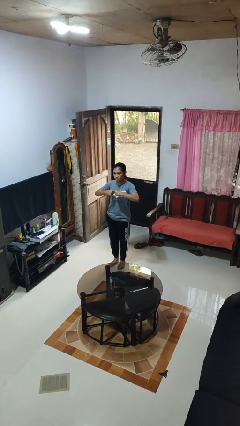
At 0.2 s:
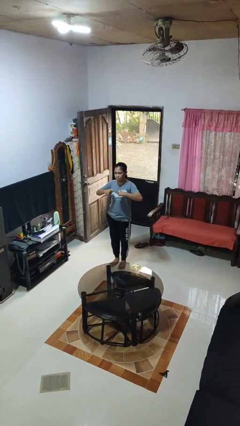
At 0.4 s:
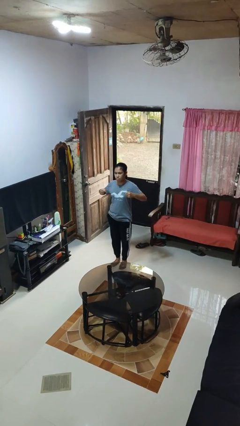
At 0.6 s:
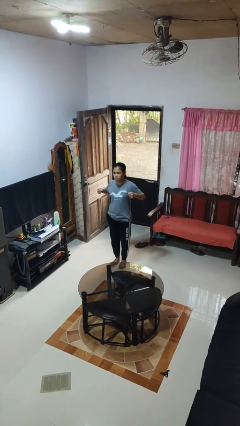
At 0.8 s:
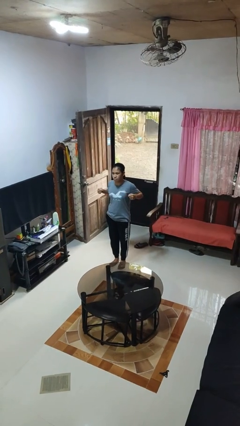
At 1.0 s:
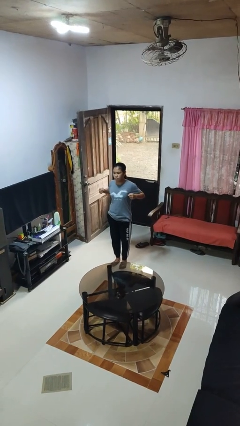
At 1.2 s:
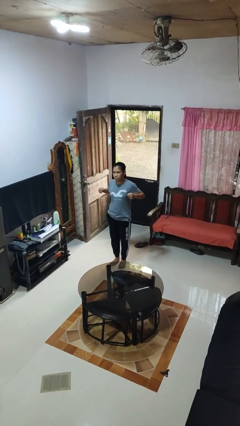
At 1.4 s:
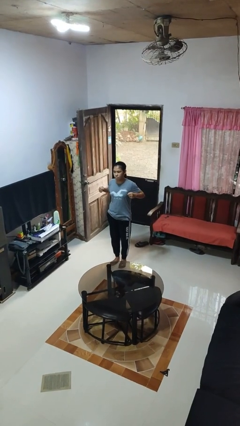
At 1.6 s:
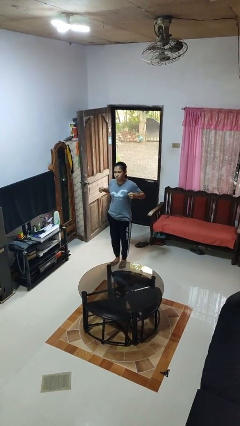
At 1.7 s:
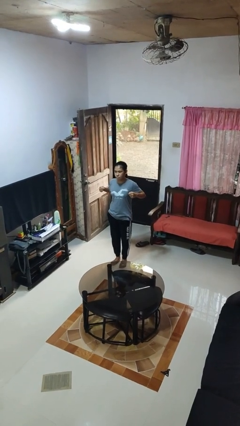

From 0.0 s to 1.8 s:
person gestures zoom in

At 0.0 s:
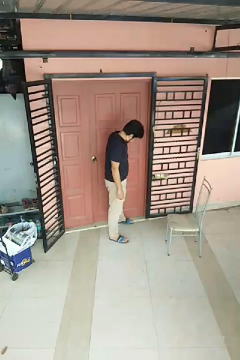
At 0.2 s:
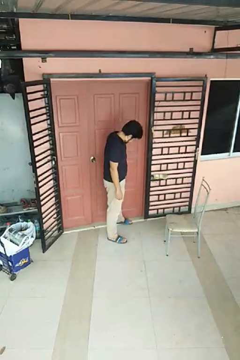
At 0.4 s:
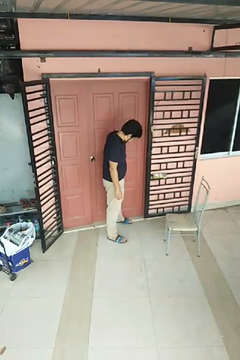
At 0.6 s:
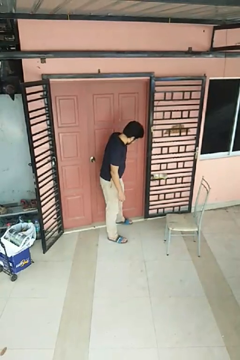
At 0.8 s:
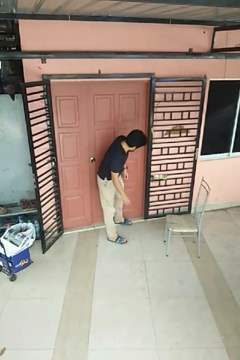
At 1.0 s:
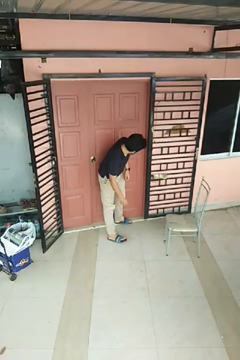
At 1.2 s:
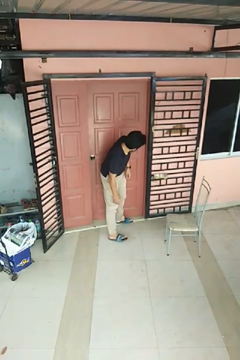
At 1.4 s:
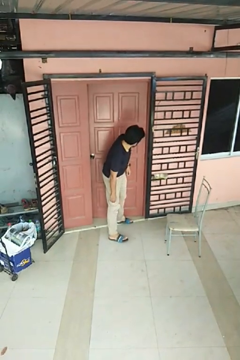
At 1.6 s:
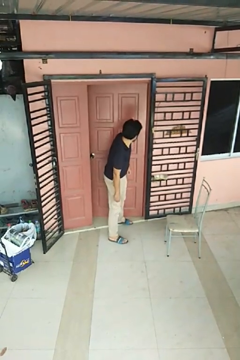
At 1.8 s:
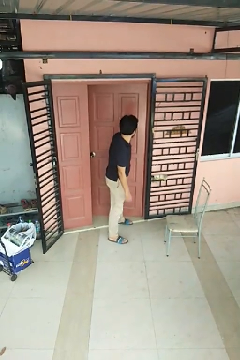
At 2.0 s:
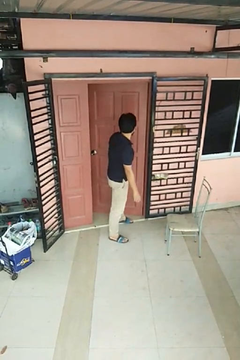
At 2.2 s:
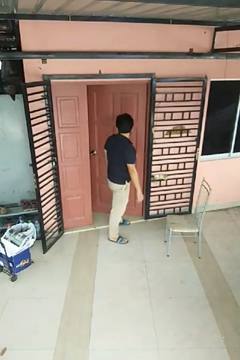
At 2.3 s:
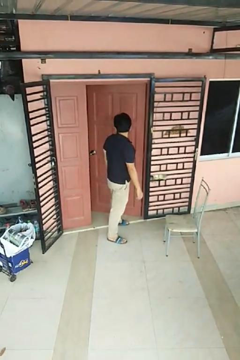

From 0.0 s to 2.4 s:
person opens facility door

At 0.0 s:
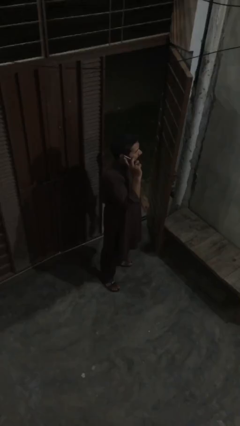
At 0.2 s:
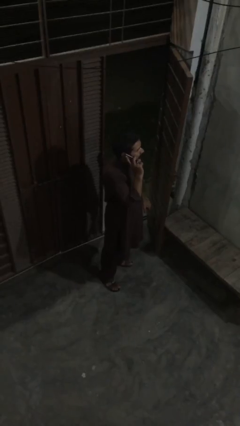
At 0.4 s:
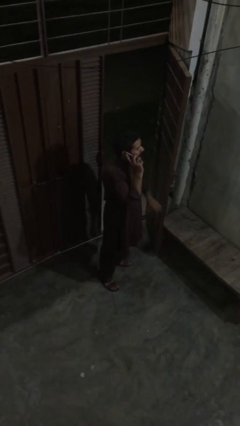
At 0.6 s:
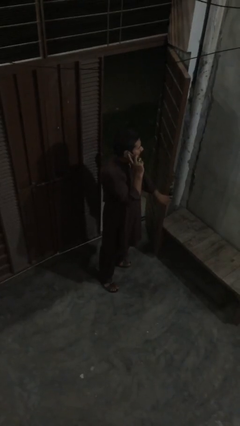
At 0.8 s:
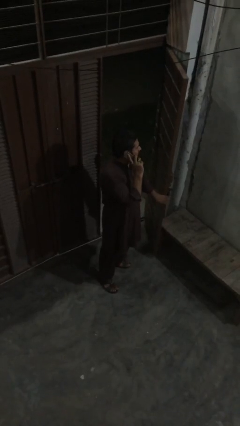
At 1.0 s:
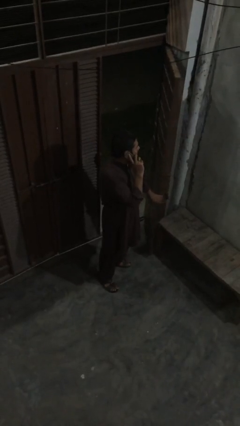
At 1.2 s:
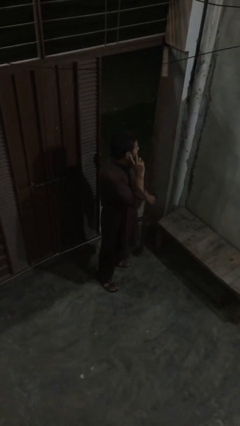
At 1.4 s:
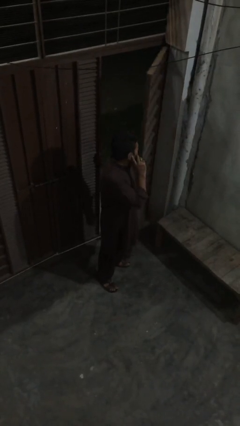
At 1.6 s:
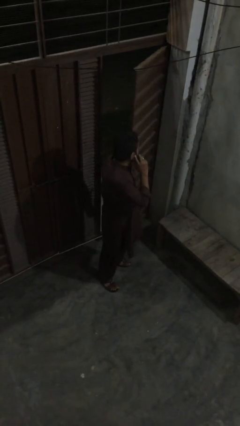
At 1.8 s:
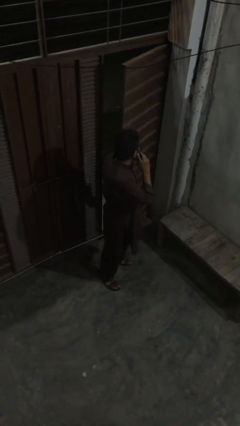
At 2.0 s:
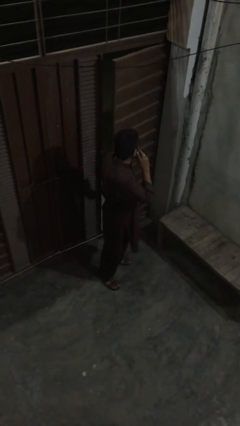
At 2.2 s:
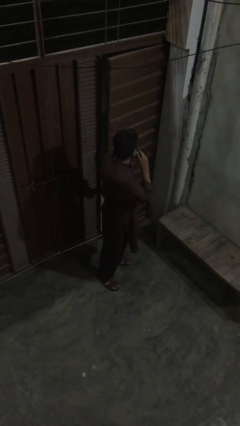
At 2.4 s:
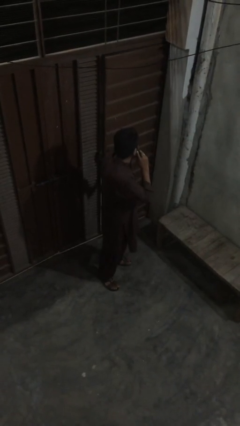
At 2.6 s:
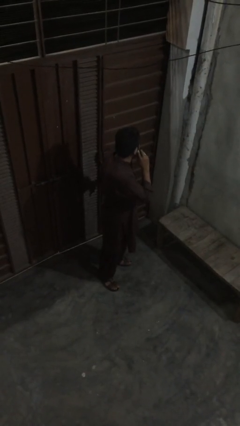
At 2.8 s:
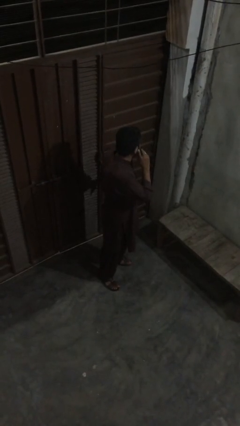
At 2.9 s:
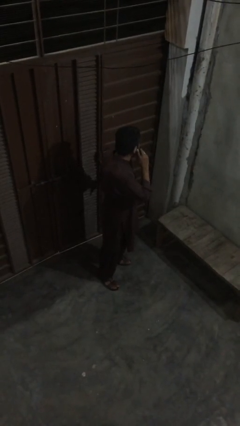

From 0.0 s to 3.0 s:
person closes facility door

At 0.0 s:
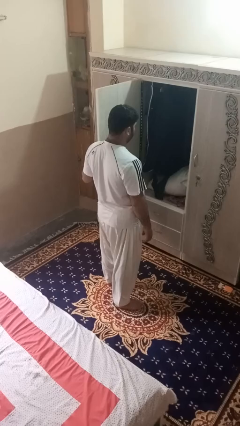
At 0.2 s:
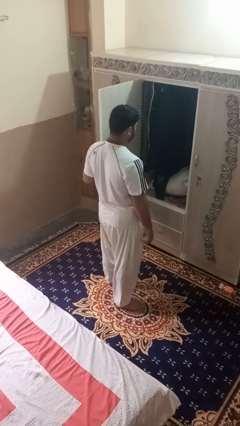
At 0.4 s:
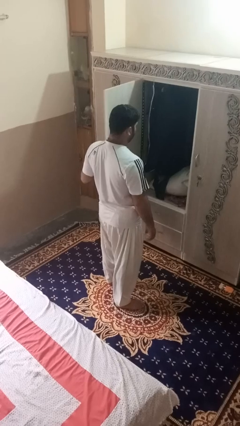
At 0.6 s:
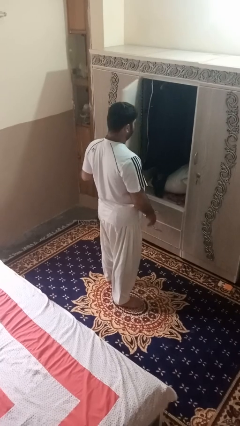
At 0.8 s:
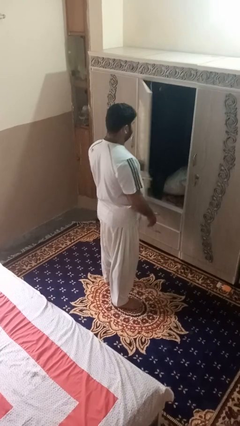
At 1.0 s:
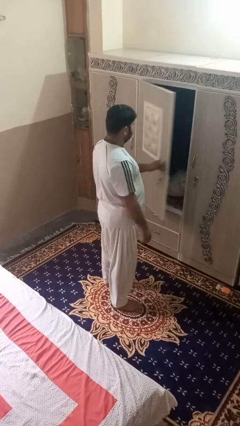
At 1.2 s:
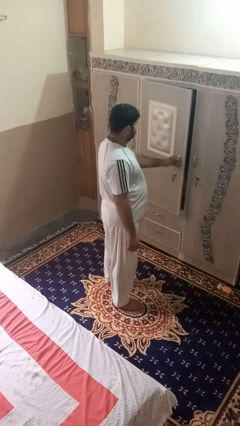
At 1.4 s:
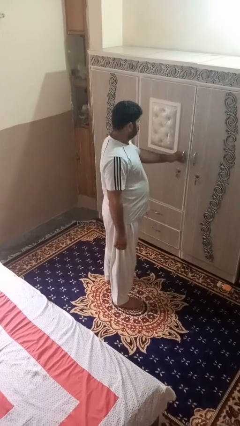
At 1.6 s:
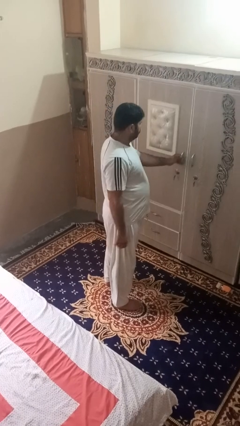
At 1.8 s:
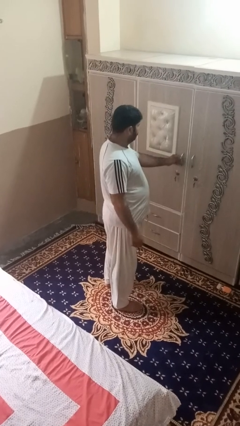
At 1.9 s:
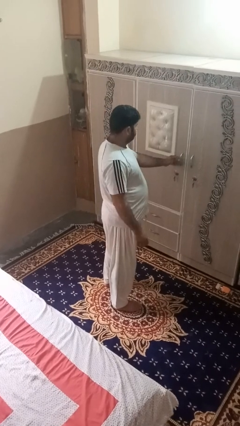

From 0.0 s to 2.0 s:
person closes dresser drawer

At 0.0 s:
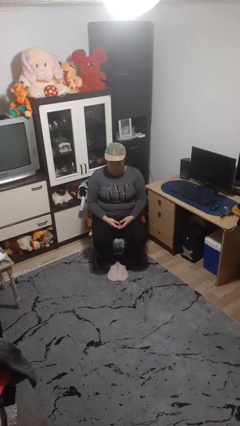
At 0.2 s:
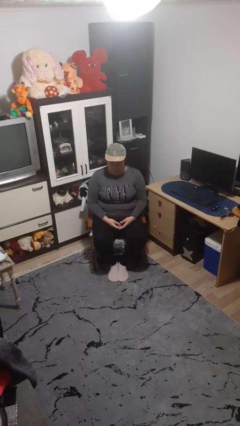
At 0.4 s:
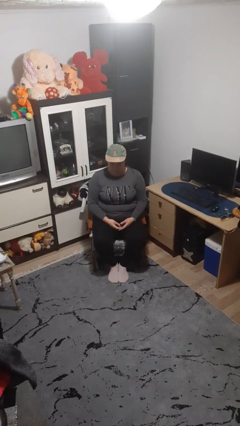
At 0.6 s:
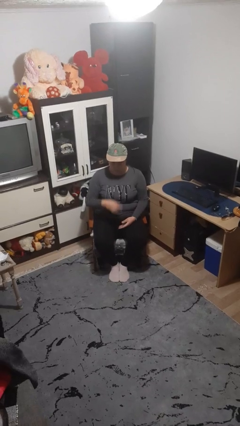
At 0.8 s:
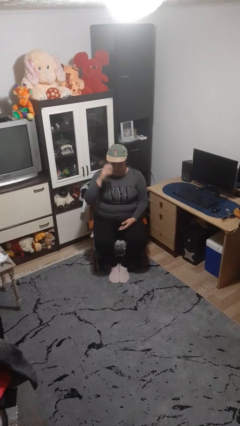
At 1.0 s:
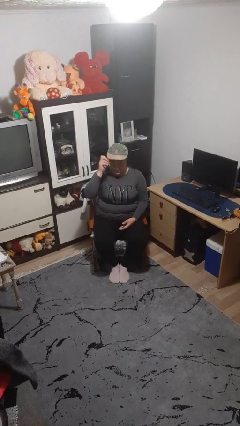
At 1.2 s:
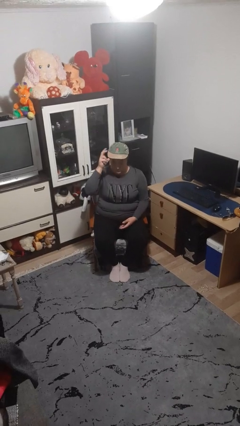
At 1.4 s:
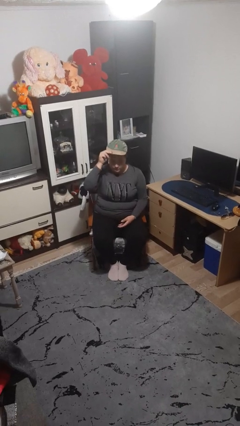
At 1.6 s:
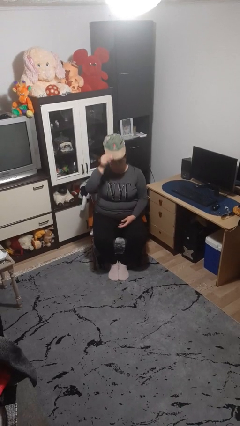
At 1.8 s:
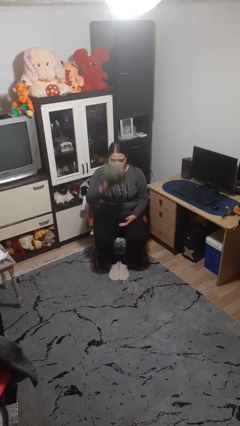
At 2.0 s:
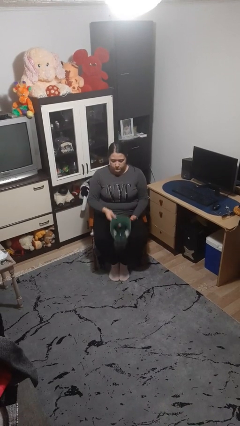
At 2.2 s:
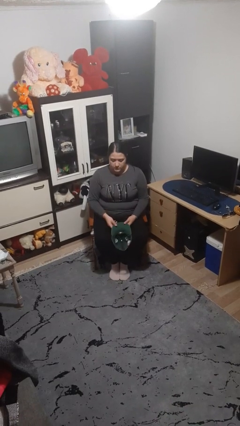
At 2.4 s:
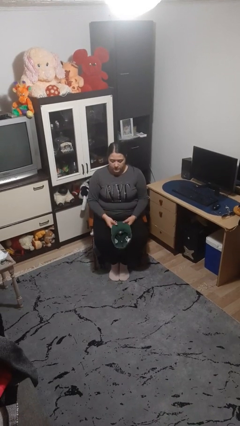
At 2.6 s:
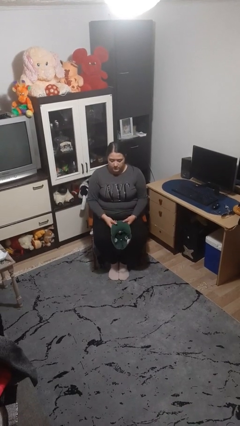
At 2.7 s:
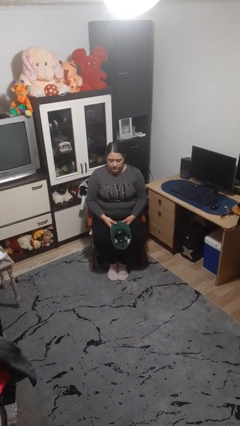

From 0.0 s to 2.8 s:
person takes off hat

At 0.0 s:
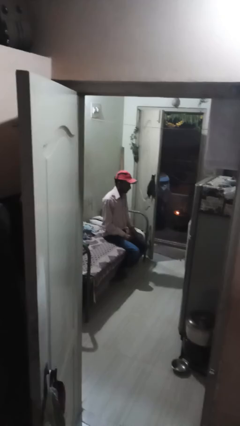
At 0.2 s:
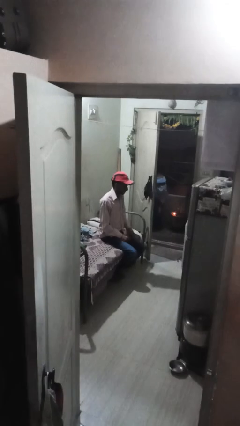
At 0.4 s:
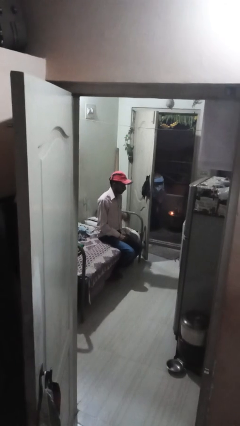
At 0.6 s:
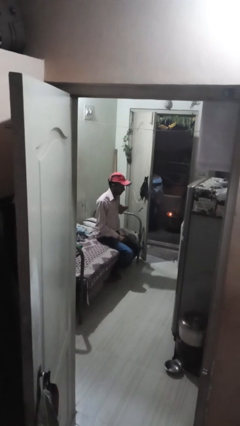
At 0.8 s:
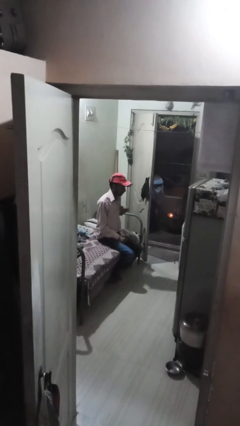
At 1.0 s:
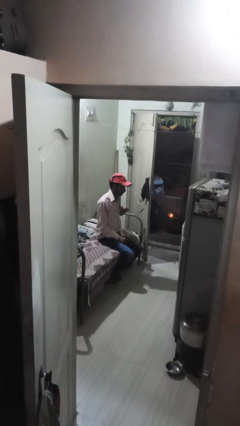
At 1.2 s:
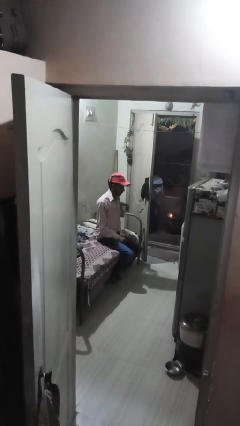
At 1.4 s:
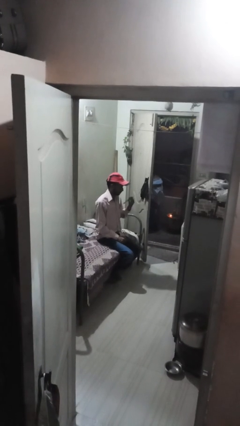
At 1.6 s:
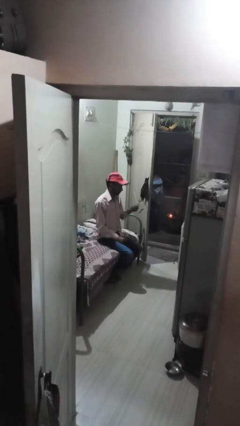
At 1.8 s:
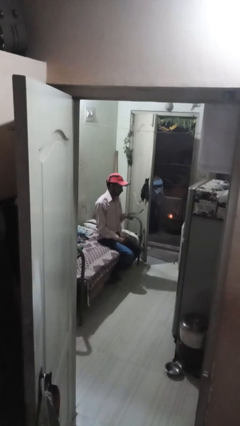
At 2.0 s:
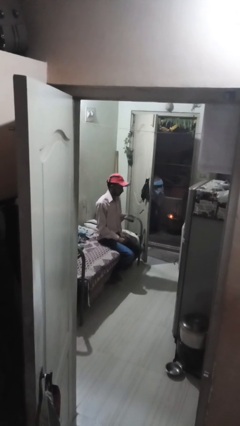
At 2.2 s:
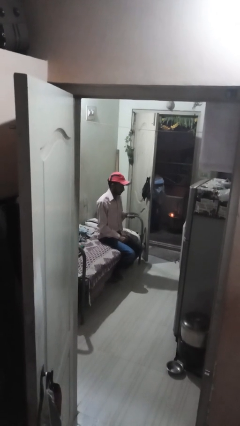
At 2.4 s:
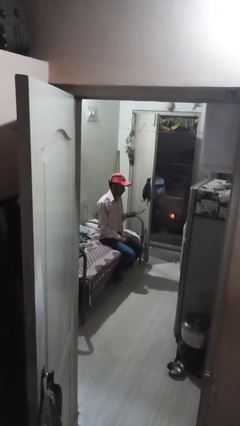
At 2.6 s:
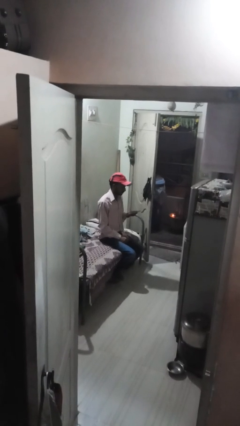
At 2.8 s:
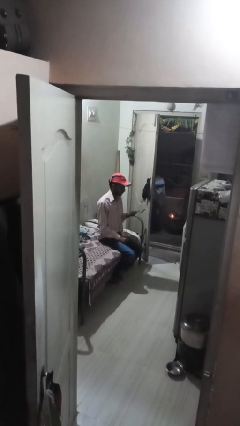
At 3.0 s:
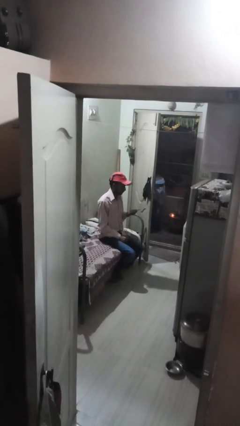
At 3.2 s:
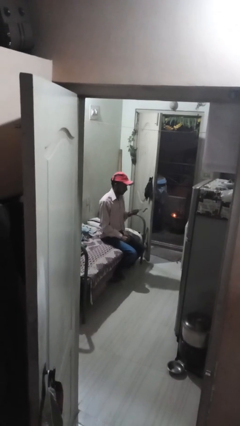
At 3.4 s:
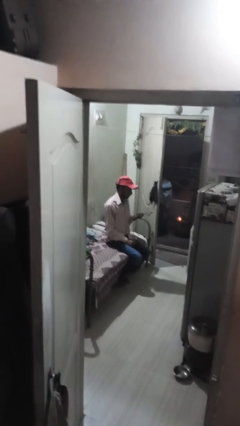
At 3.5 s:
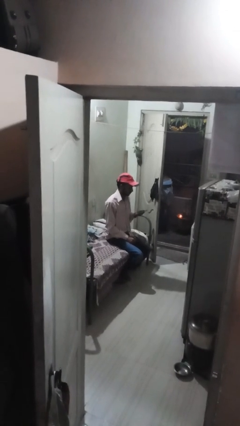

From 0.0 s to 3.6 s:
person takes phone from pocket

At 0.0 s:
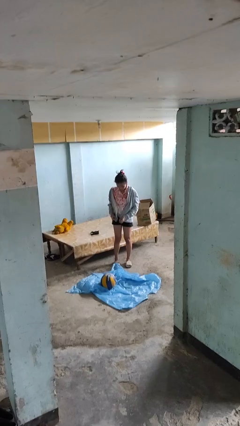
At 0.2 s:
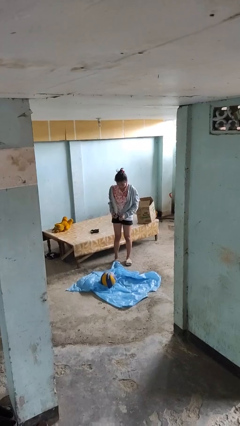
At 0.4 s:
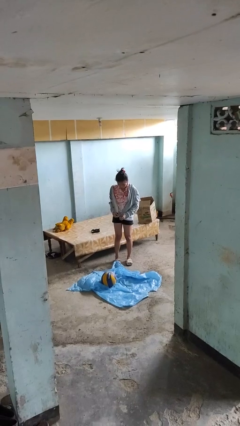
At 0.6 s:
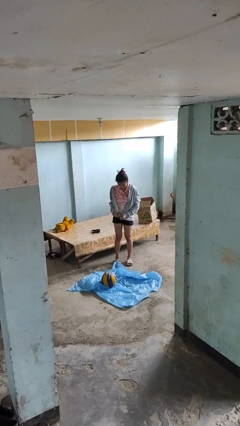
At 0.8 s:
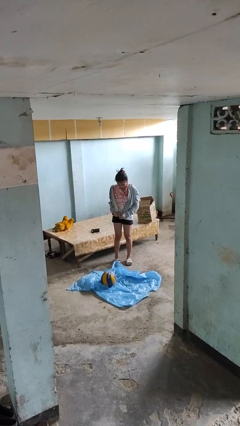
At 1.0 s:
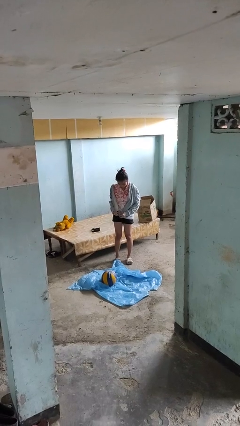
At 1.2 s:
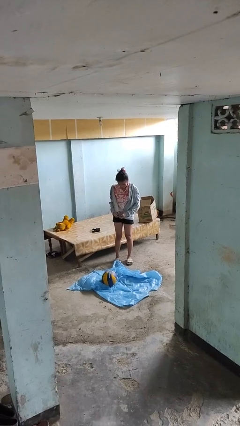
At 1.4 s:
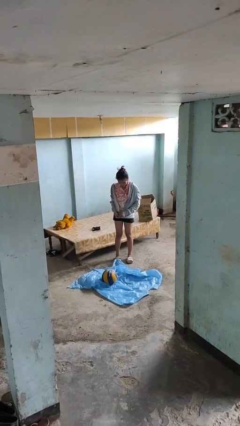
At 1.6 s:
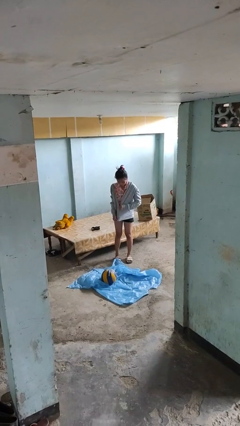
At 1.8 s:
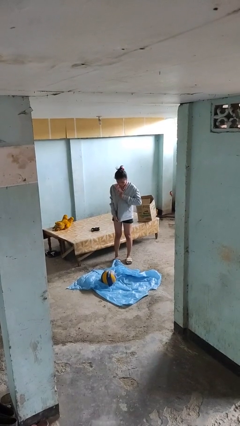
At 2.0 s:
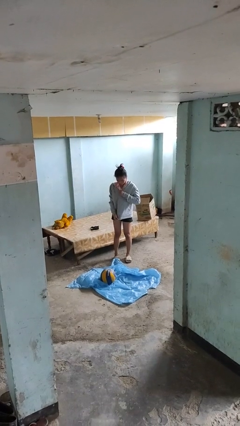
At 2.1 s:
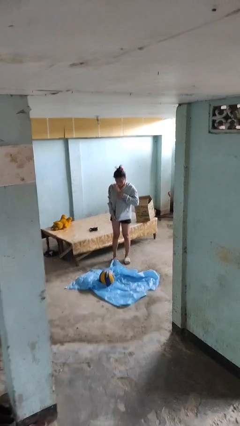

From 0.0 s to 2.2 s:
person zips up jacket
